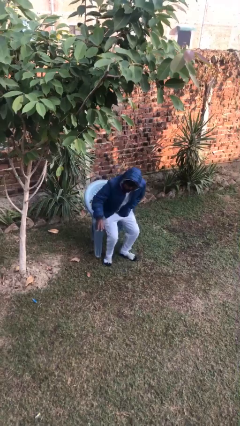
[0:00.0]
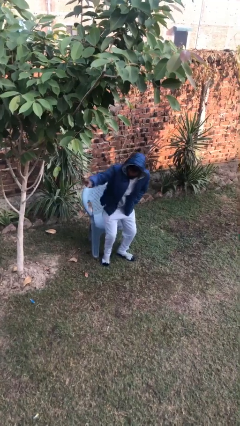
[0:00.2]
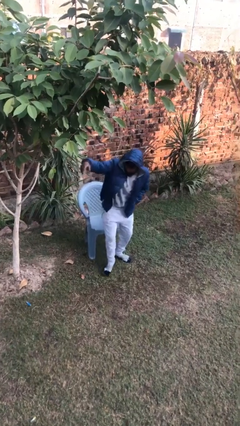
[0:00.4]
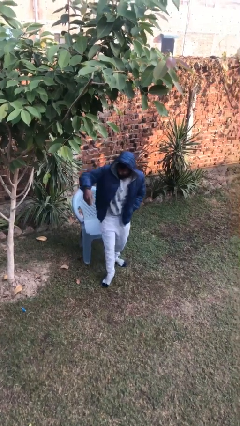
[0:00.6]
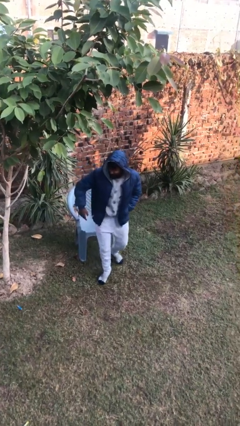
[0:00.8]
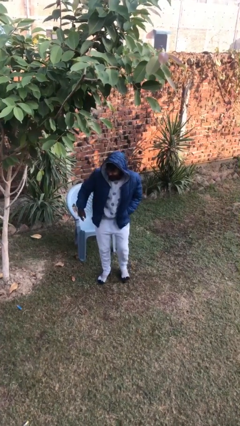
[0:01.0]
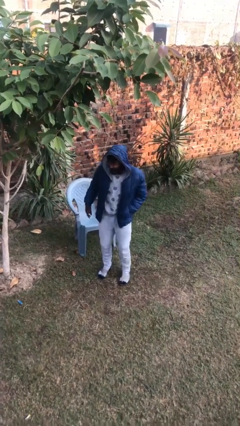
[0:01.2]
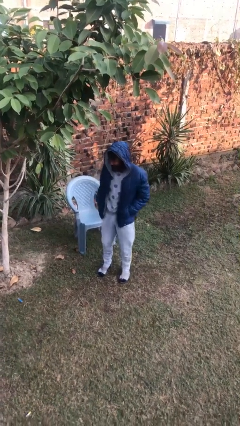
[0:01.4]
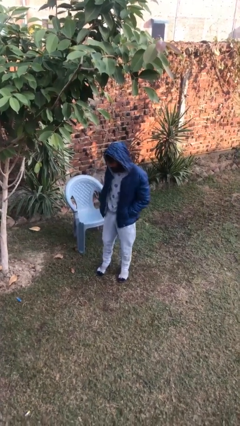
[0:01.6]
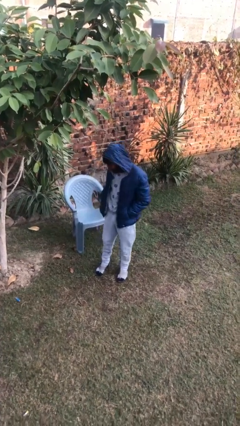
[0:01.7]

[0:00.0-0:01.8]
person stands up

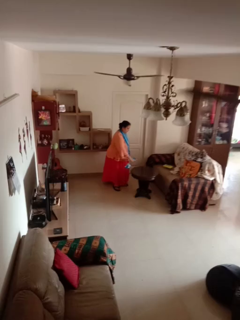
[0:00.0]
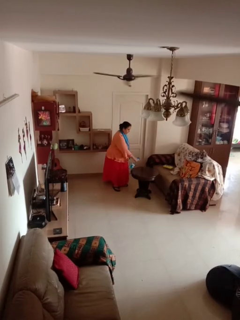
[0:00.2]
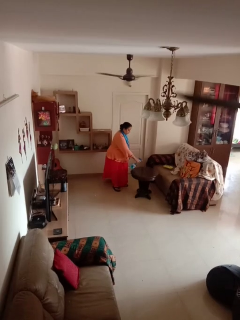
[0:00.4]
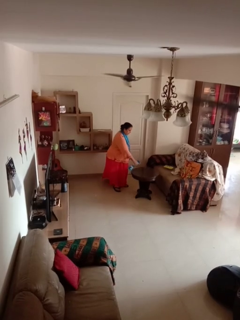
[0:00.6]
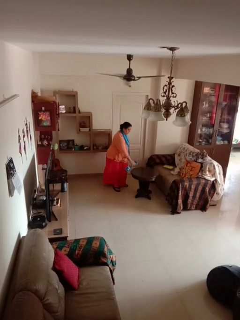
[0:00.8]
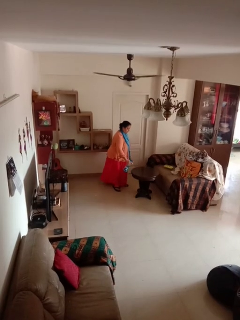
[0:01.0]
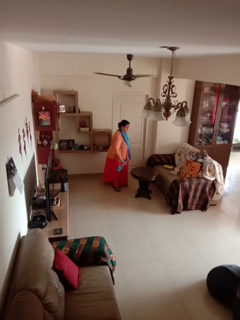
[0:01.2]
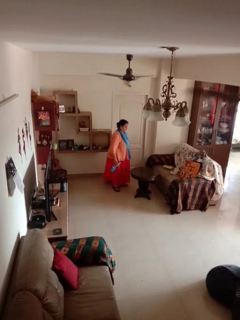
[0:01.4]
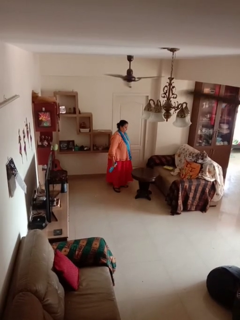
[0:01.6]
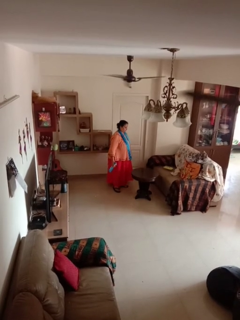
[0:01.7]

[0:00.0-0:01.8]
person sprays from bottle

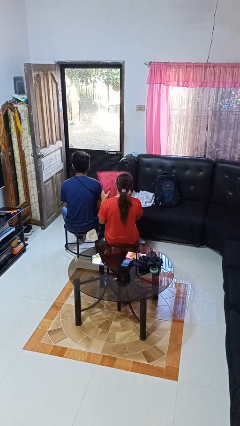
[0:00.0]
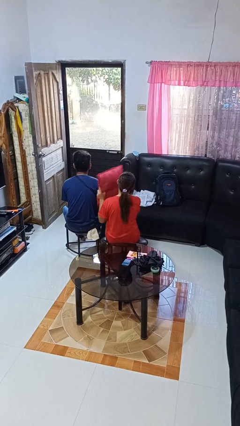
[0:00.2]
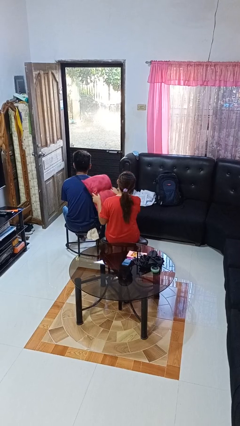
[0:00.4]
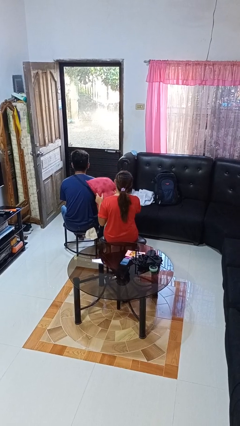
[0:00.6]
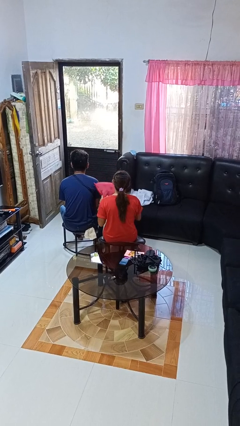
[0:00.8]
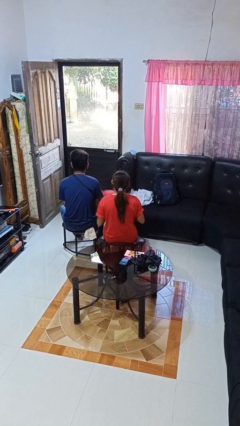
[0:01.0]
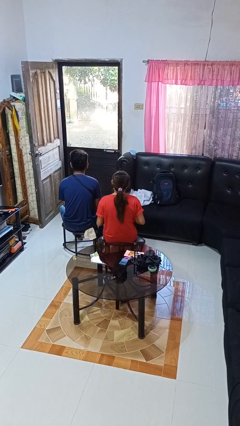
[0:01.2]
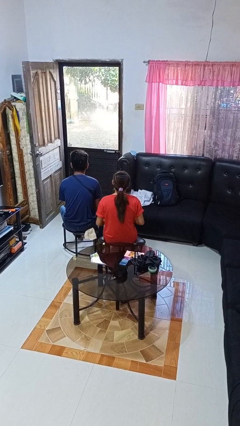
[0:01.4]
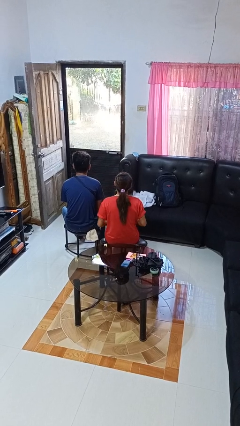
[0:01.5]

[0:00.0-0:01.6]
person hits person with pillow

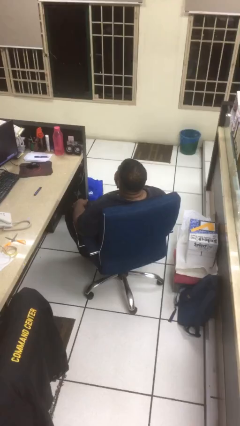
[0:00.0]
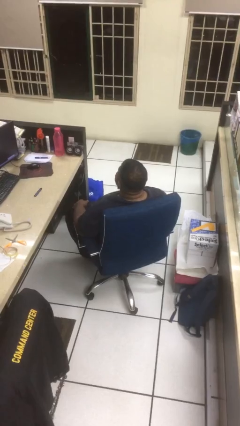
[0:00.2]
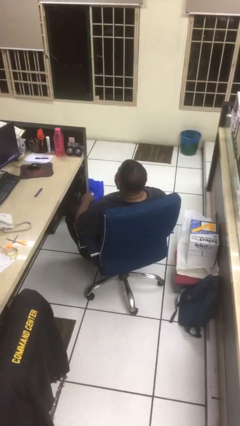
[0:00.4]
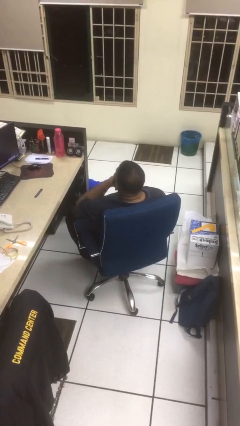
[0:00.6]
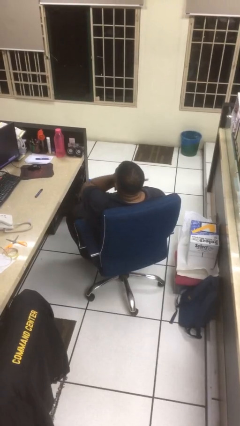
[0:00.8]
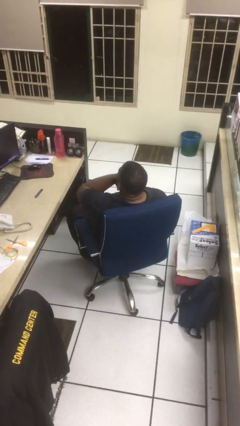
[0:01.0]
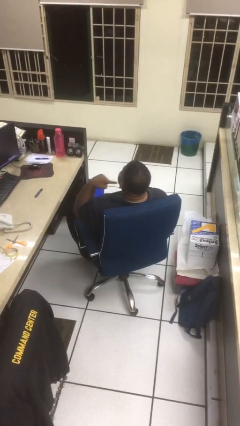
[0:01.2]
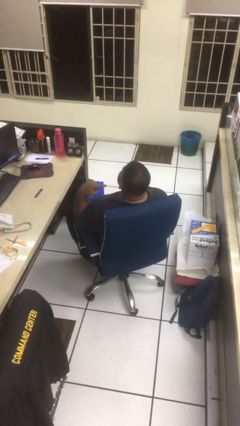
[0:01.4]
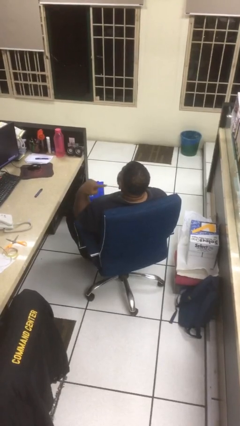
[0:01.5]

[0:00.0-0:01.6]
person gestures cut

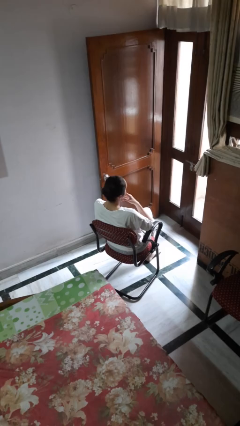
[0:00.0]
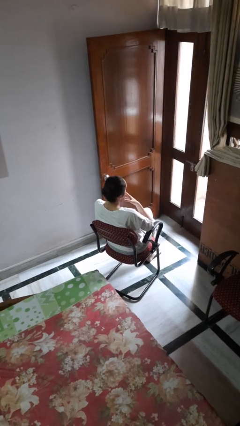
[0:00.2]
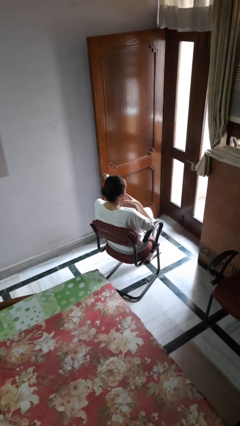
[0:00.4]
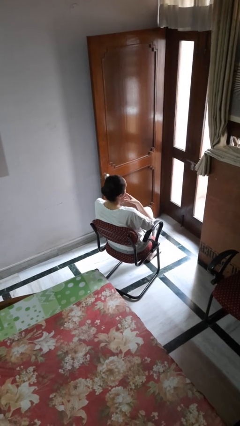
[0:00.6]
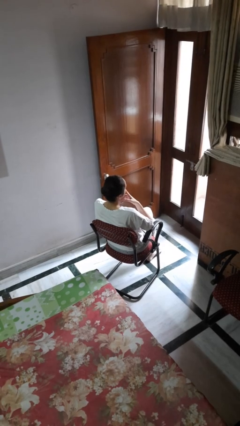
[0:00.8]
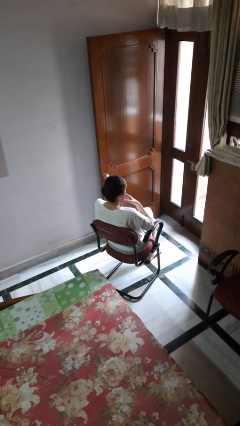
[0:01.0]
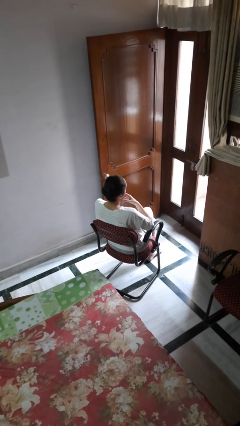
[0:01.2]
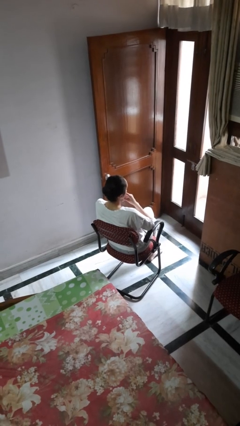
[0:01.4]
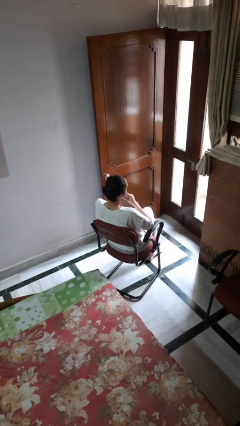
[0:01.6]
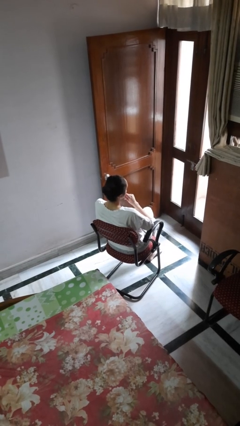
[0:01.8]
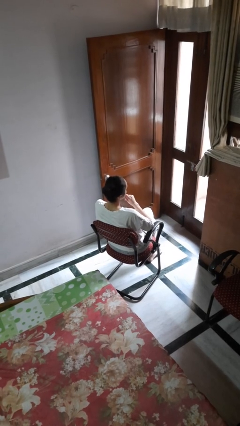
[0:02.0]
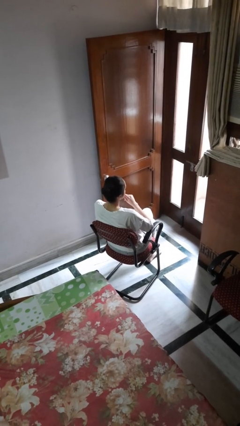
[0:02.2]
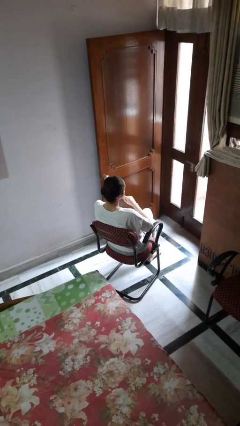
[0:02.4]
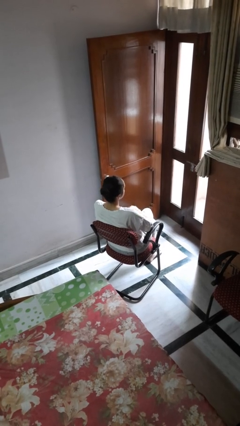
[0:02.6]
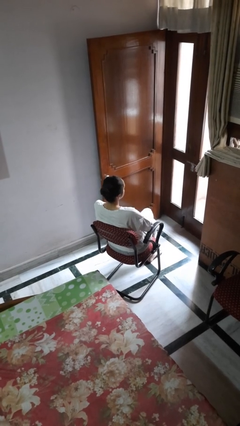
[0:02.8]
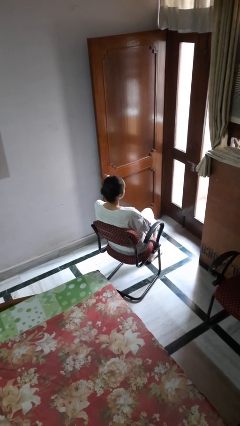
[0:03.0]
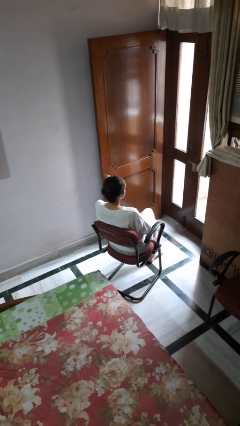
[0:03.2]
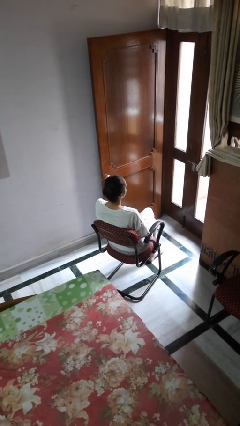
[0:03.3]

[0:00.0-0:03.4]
person strokes chin

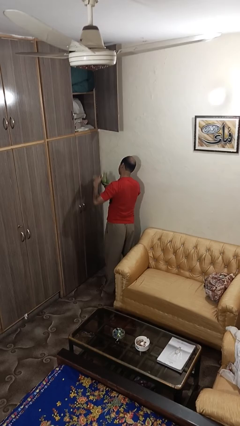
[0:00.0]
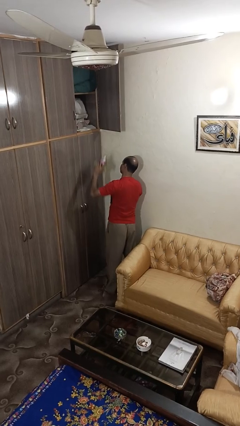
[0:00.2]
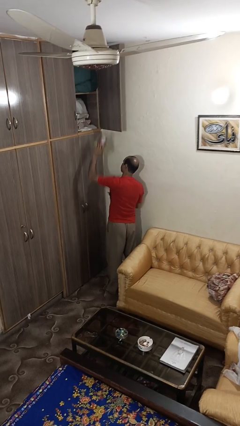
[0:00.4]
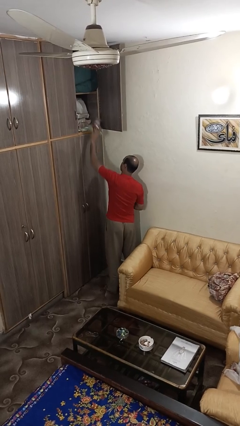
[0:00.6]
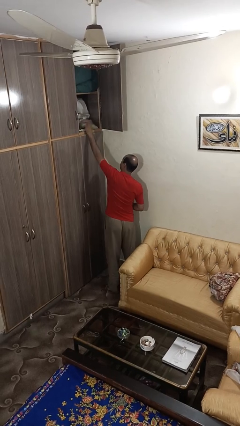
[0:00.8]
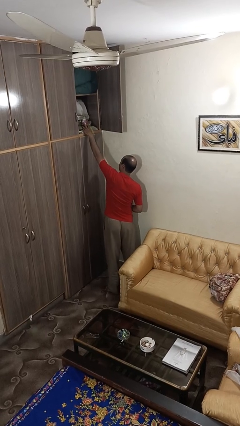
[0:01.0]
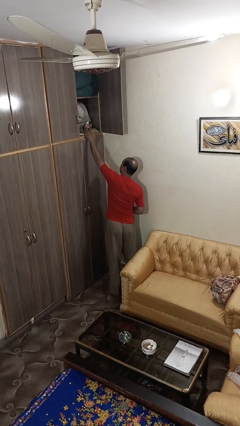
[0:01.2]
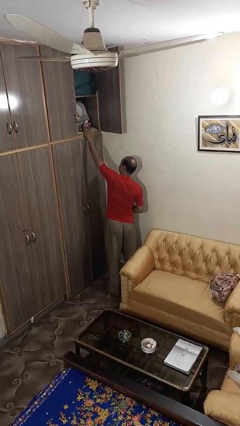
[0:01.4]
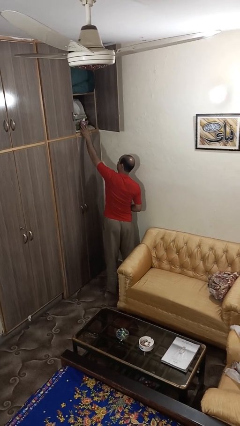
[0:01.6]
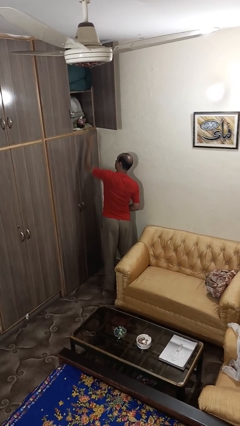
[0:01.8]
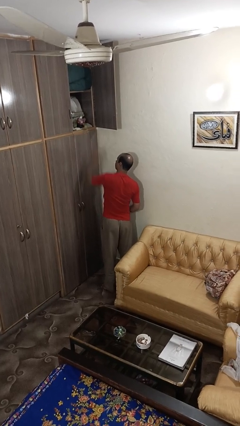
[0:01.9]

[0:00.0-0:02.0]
person puts down object on shelf

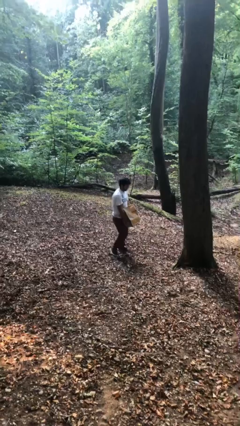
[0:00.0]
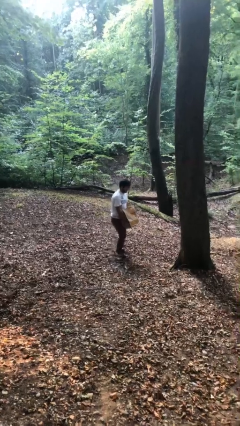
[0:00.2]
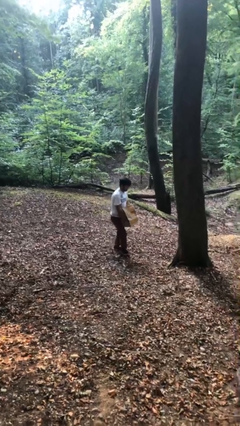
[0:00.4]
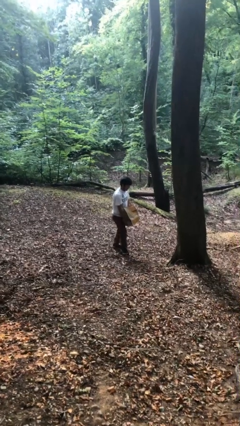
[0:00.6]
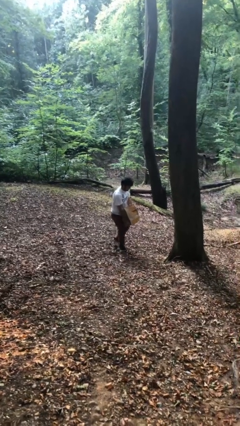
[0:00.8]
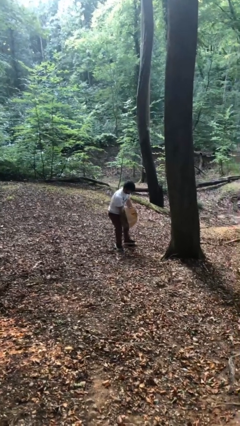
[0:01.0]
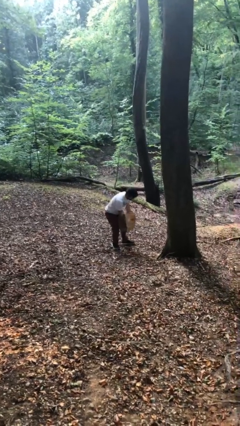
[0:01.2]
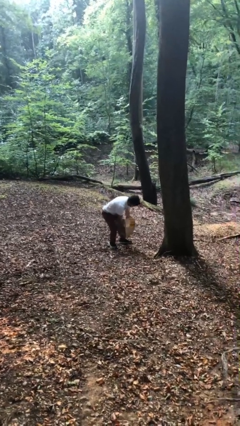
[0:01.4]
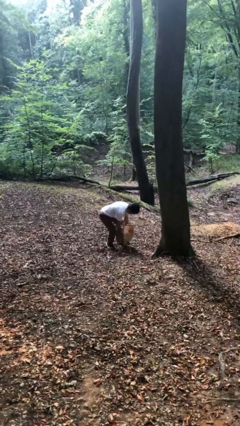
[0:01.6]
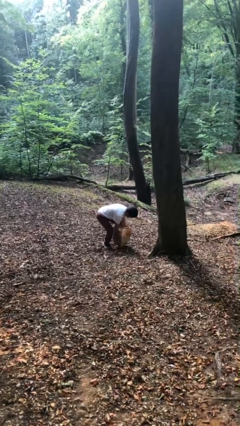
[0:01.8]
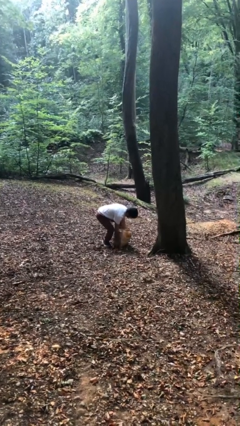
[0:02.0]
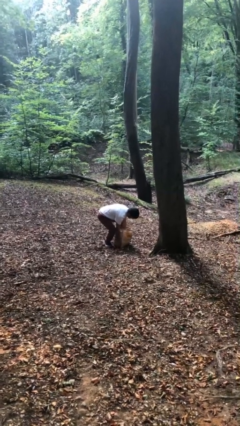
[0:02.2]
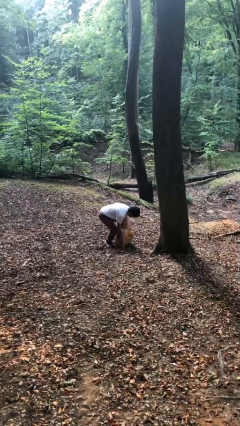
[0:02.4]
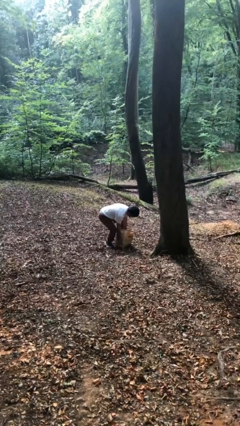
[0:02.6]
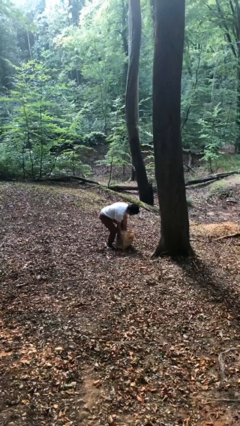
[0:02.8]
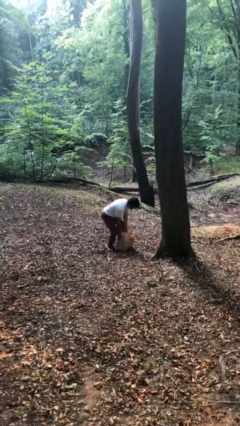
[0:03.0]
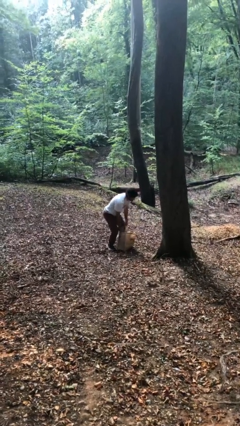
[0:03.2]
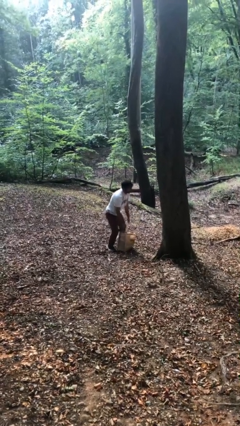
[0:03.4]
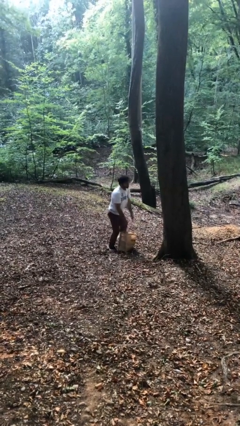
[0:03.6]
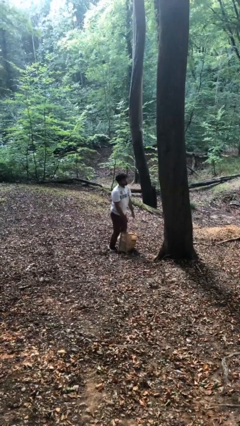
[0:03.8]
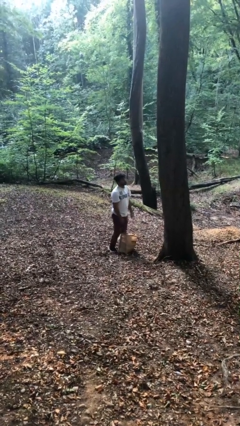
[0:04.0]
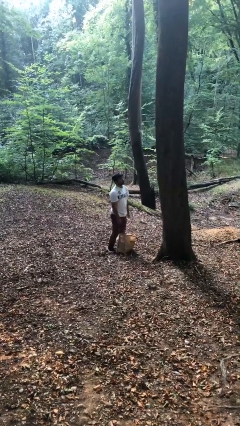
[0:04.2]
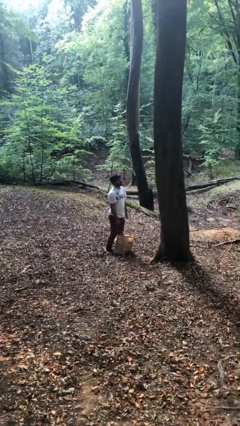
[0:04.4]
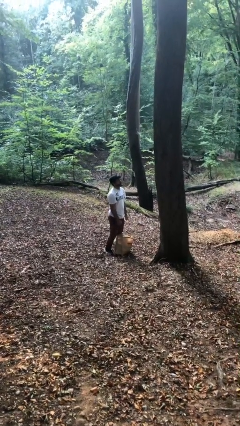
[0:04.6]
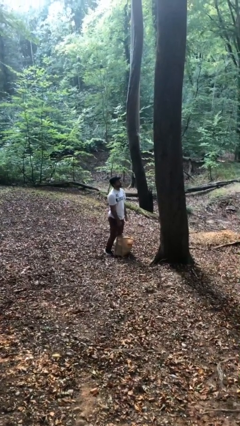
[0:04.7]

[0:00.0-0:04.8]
person puts down object on floor

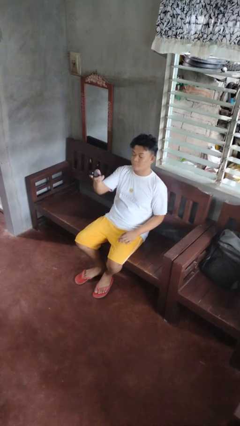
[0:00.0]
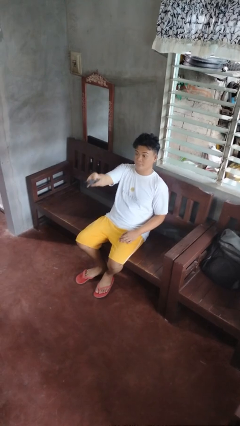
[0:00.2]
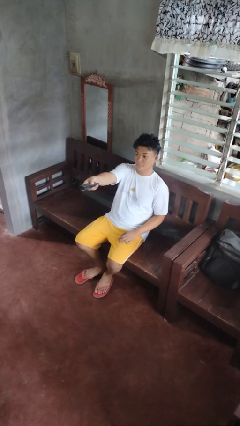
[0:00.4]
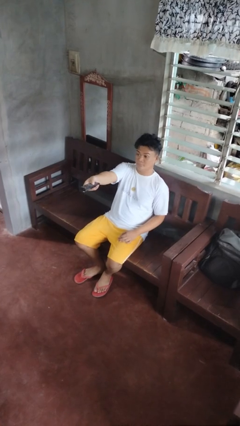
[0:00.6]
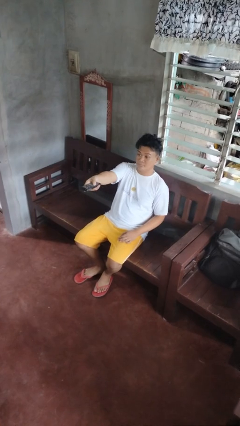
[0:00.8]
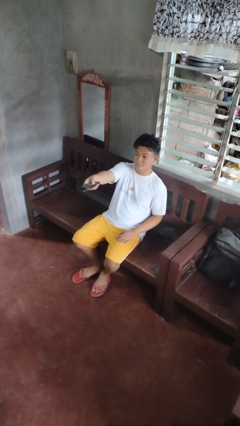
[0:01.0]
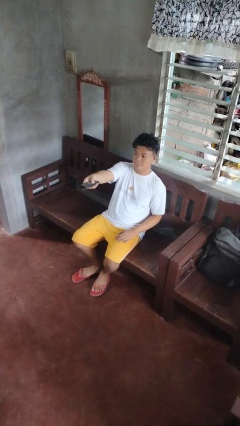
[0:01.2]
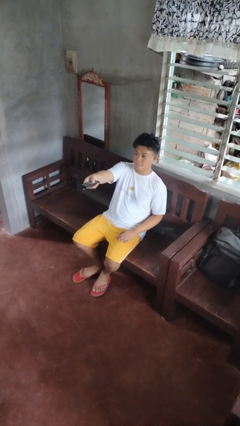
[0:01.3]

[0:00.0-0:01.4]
person uses television remote
